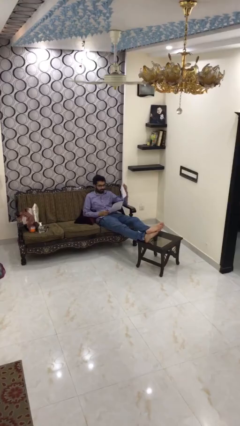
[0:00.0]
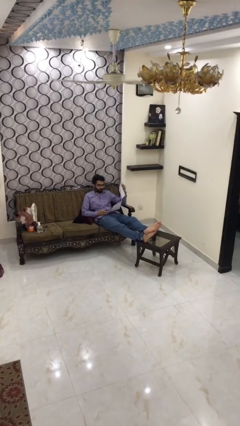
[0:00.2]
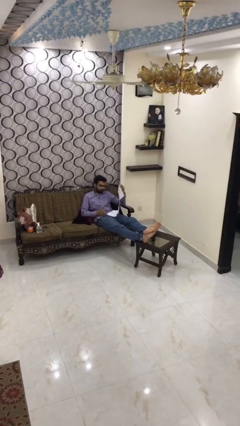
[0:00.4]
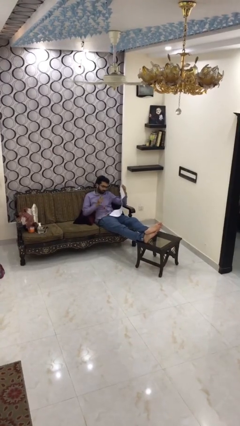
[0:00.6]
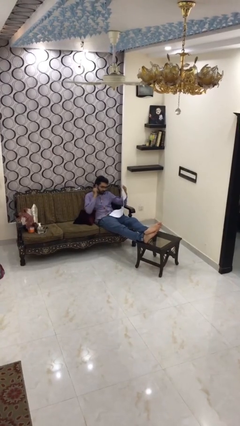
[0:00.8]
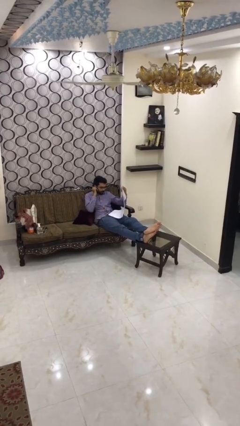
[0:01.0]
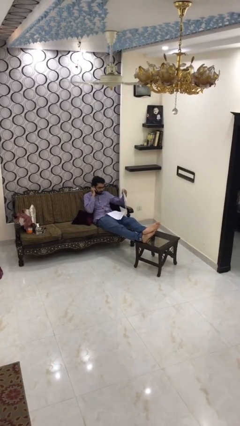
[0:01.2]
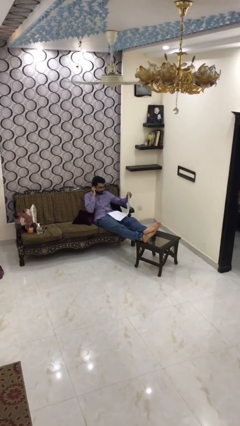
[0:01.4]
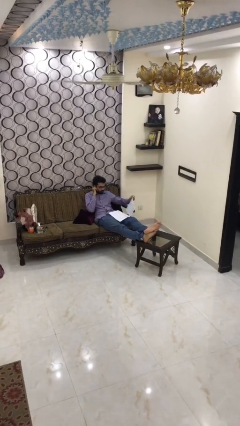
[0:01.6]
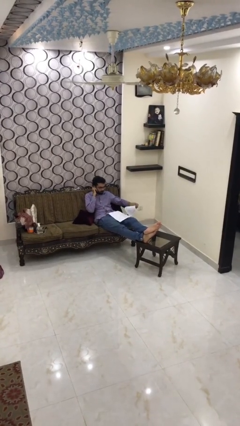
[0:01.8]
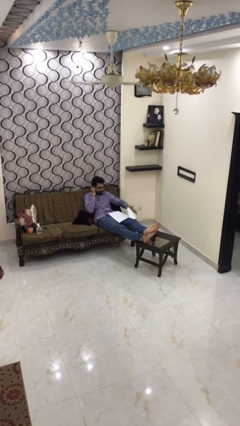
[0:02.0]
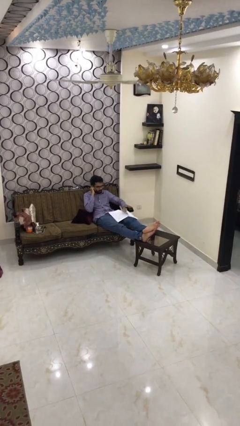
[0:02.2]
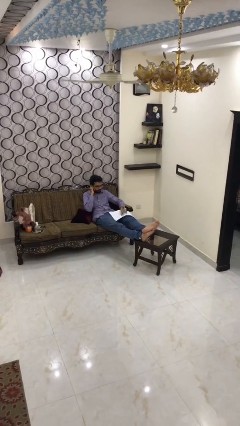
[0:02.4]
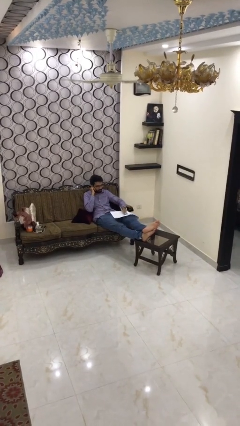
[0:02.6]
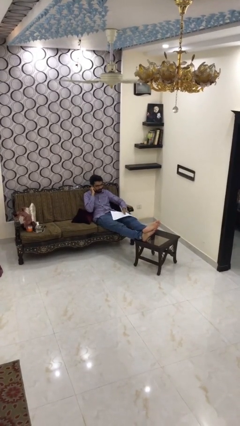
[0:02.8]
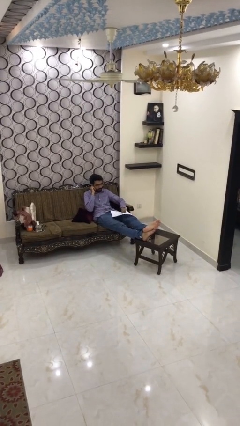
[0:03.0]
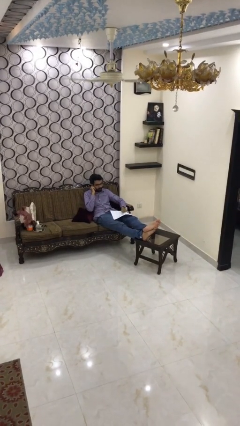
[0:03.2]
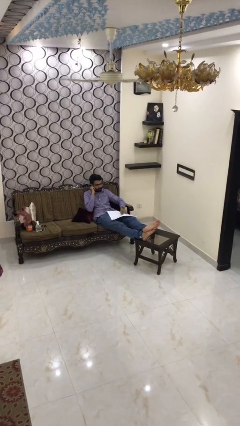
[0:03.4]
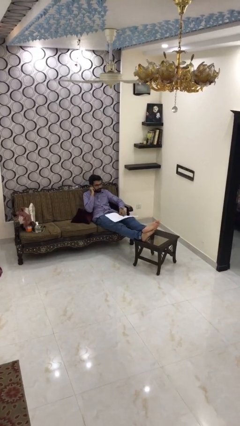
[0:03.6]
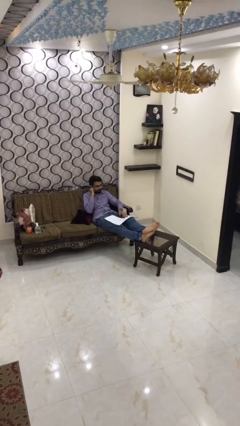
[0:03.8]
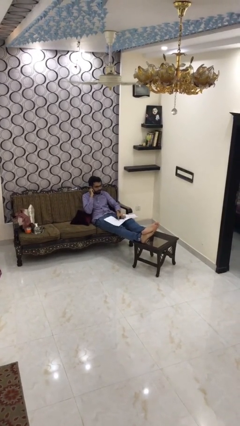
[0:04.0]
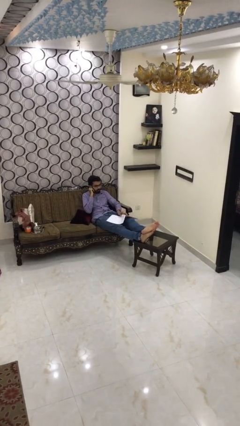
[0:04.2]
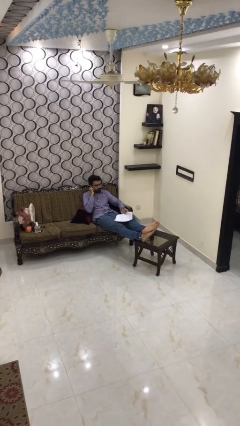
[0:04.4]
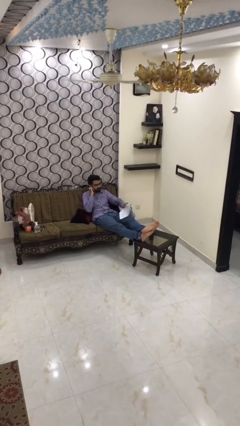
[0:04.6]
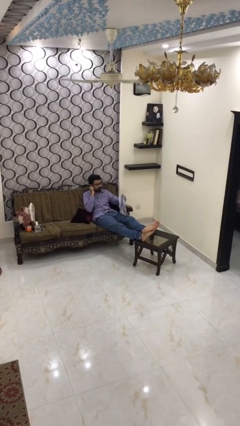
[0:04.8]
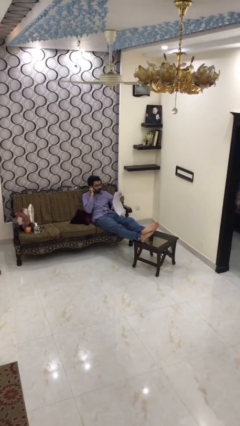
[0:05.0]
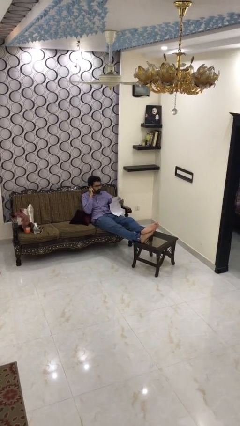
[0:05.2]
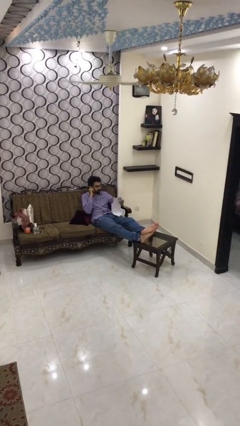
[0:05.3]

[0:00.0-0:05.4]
person reads document

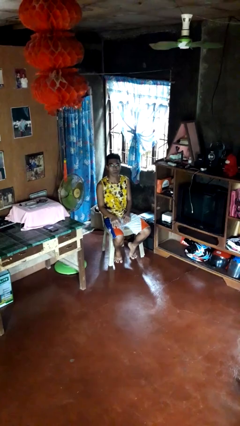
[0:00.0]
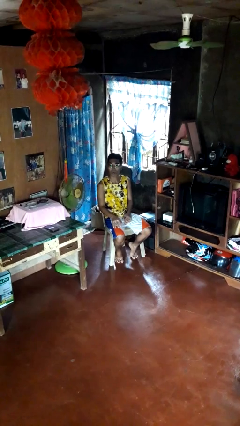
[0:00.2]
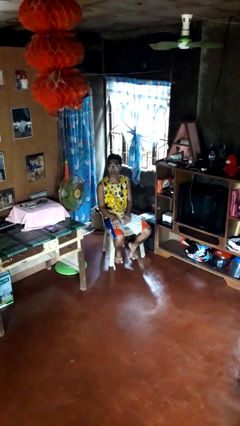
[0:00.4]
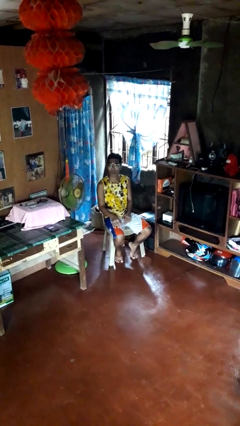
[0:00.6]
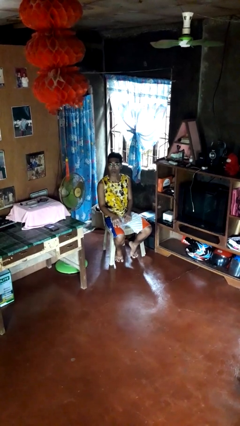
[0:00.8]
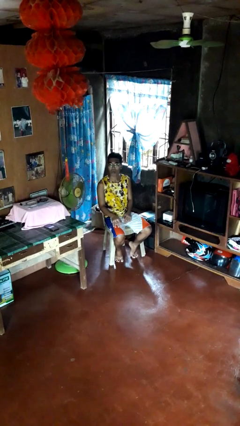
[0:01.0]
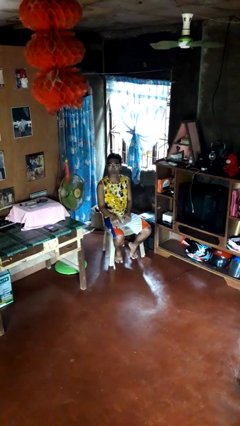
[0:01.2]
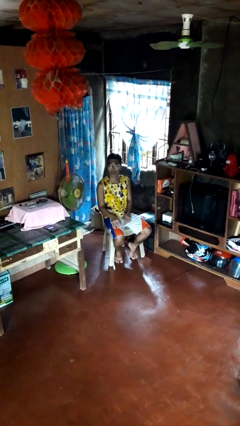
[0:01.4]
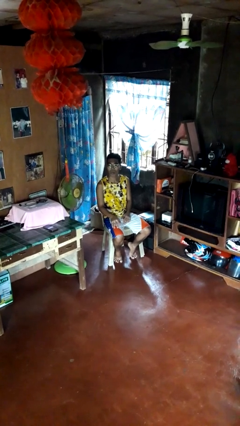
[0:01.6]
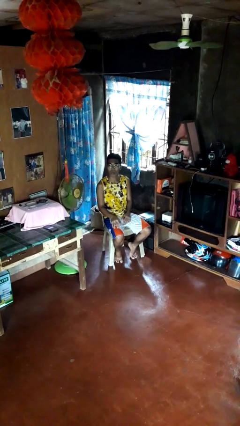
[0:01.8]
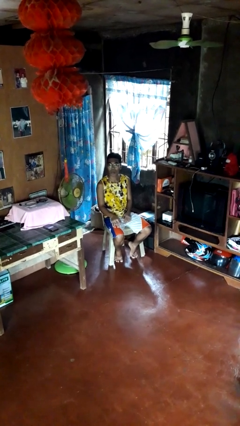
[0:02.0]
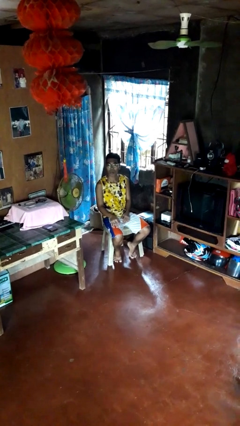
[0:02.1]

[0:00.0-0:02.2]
person sticks out tongue

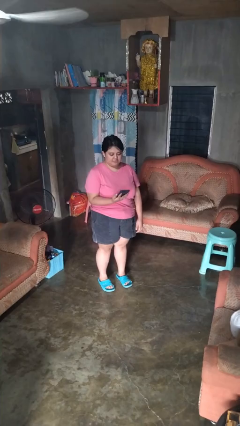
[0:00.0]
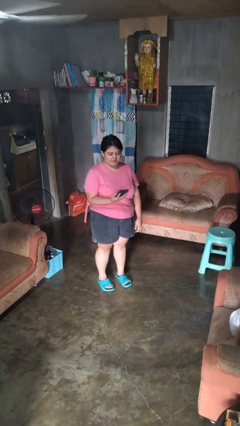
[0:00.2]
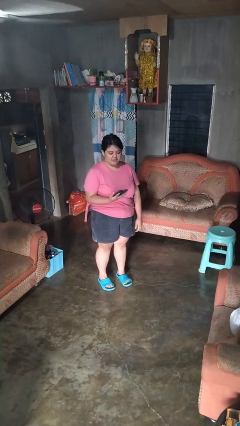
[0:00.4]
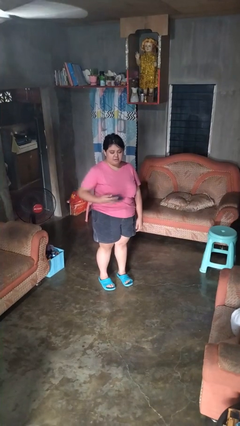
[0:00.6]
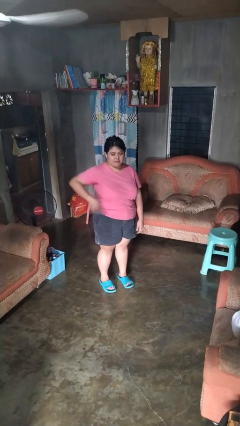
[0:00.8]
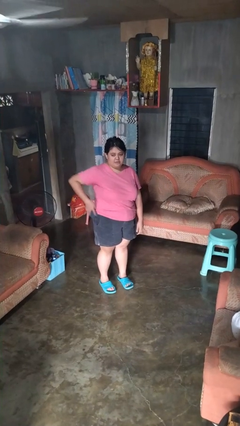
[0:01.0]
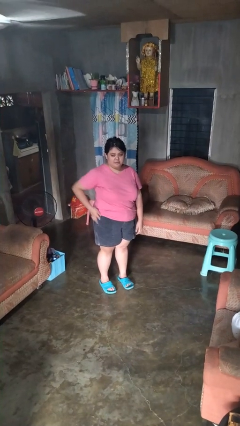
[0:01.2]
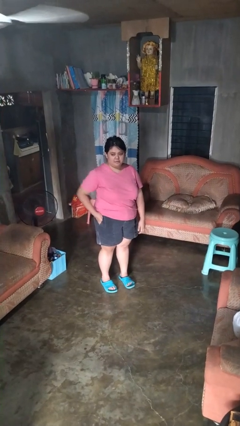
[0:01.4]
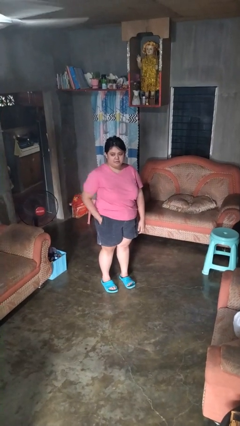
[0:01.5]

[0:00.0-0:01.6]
person puts phone into pocket

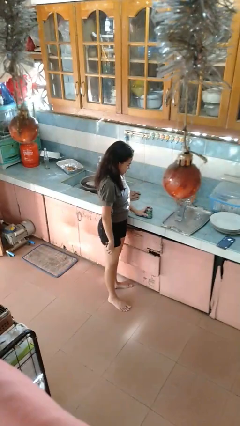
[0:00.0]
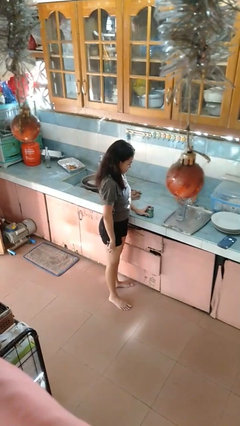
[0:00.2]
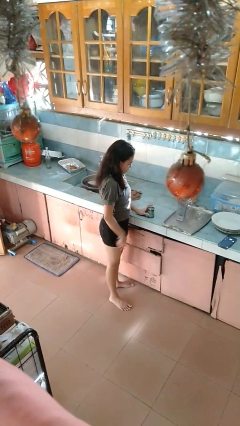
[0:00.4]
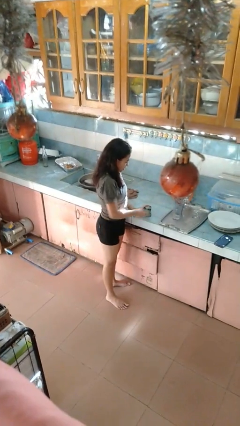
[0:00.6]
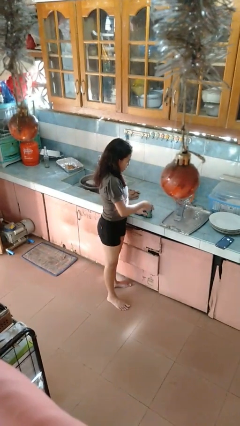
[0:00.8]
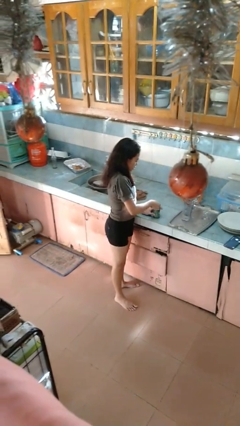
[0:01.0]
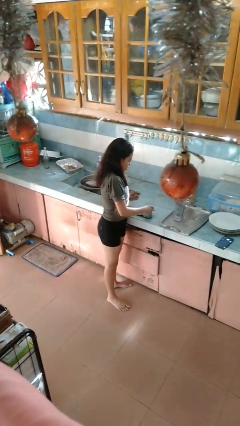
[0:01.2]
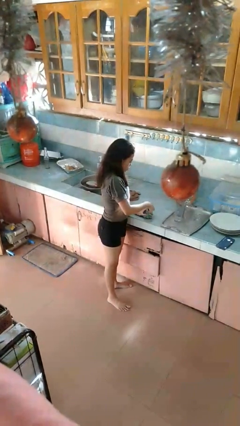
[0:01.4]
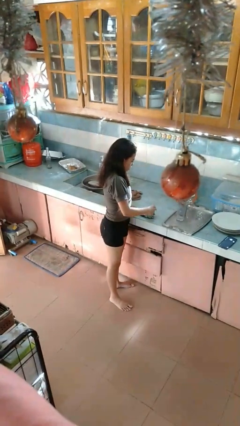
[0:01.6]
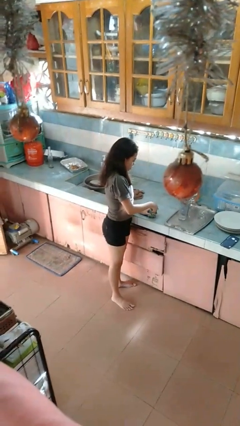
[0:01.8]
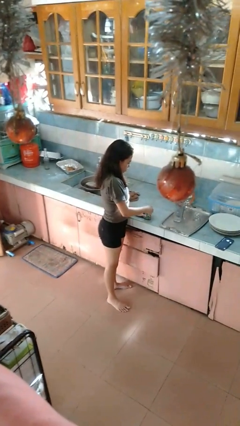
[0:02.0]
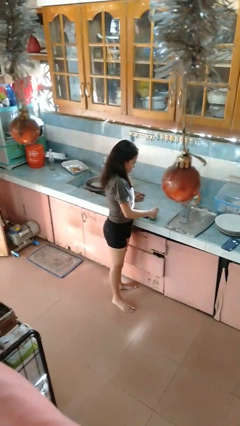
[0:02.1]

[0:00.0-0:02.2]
person opens can with can opener

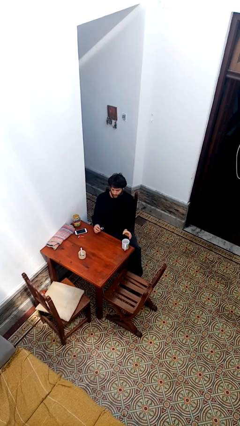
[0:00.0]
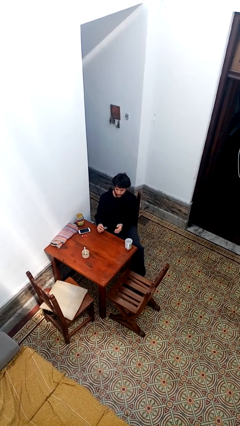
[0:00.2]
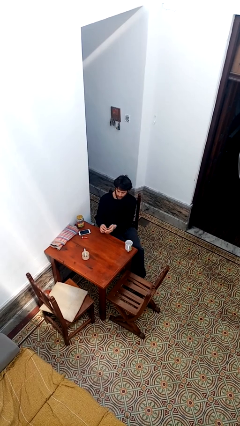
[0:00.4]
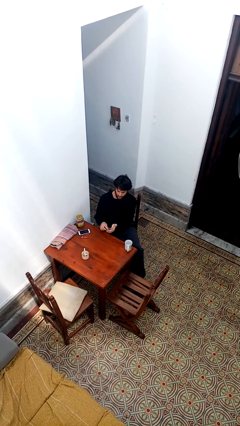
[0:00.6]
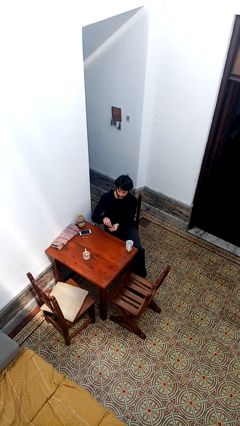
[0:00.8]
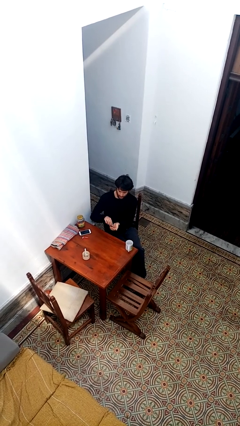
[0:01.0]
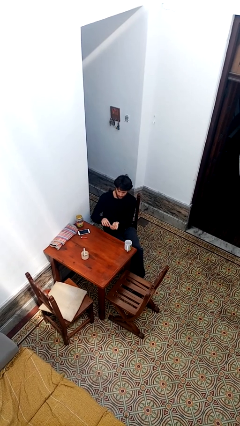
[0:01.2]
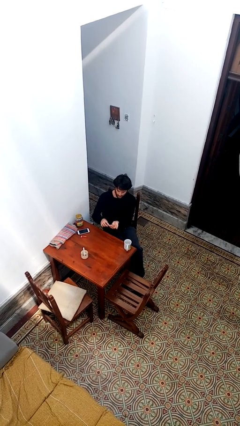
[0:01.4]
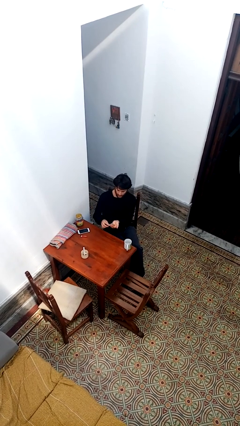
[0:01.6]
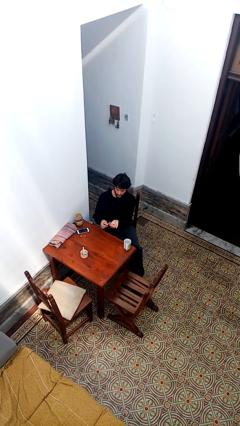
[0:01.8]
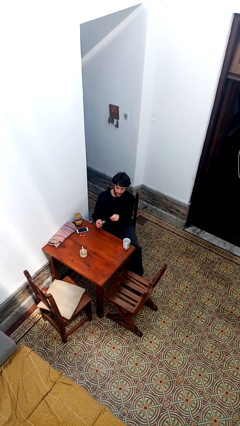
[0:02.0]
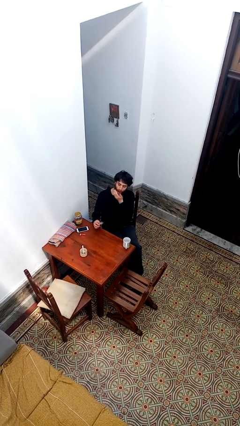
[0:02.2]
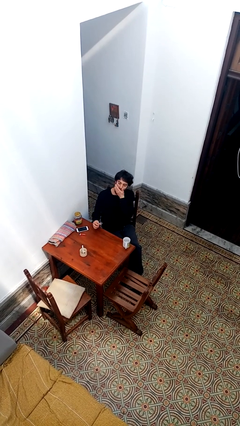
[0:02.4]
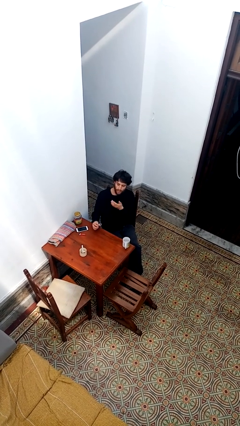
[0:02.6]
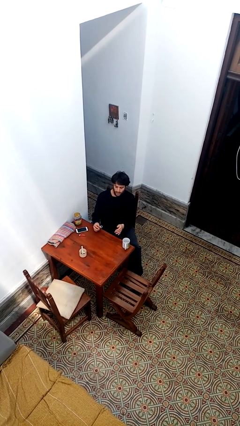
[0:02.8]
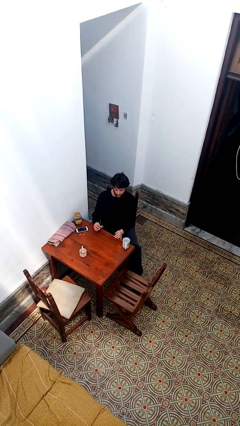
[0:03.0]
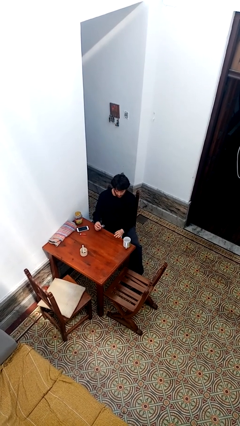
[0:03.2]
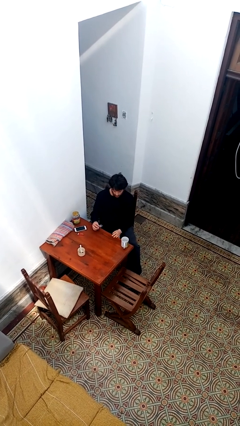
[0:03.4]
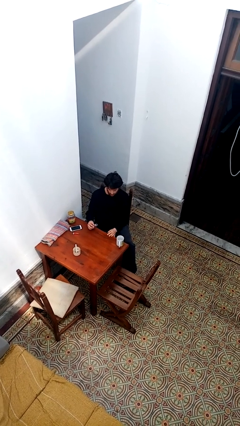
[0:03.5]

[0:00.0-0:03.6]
person takes medicine pills

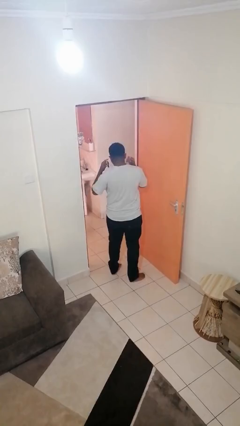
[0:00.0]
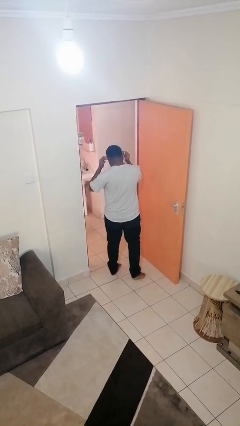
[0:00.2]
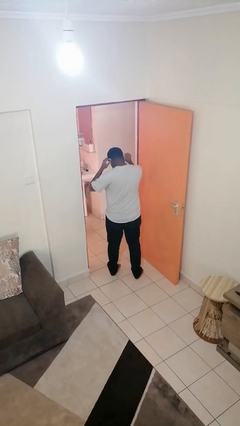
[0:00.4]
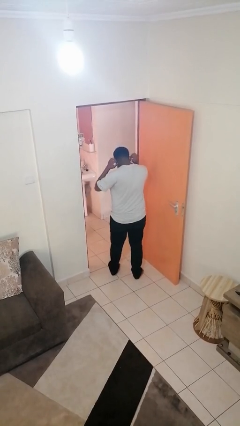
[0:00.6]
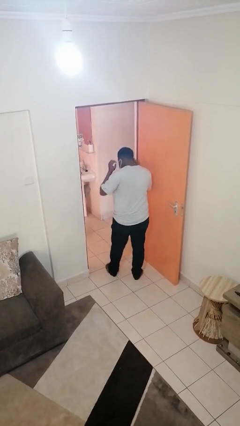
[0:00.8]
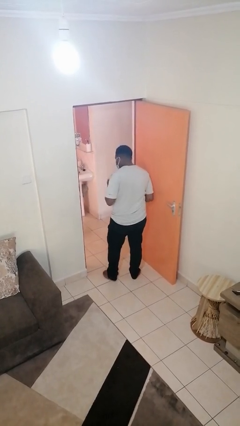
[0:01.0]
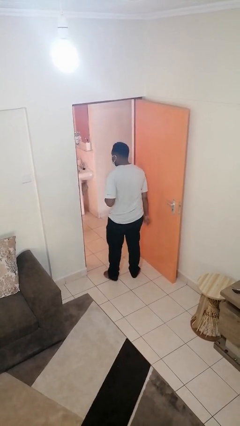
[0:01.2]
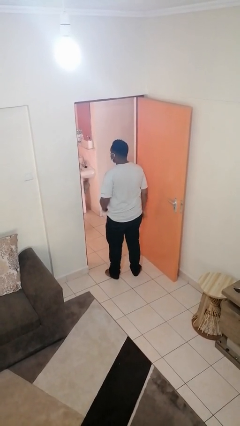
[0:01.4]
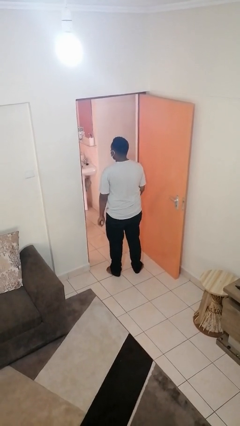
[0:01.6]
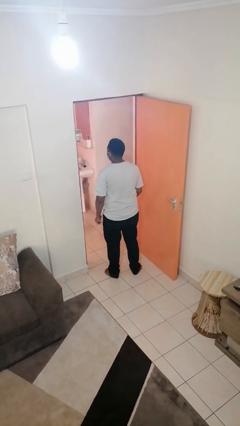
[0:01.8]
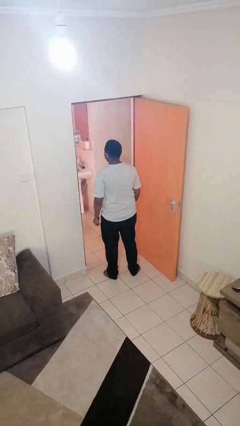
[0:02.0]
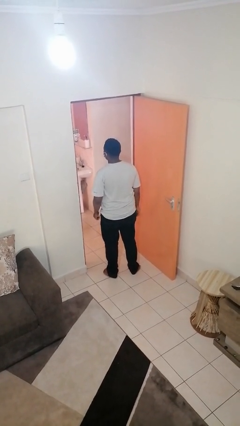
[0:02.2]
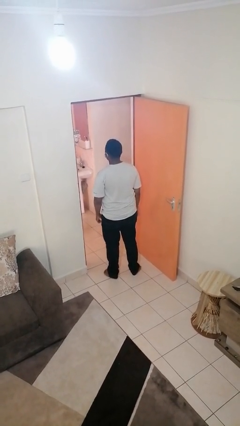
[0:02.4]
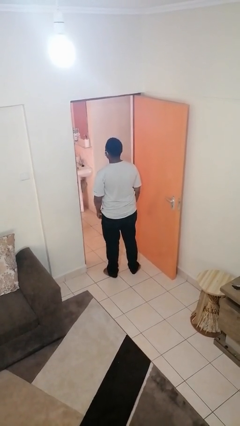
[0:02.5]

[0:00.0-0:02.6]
person puts on facemask
